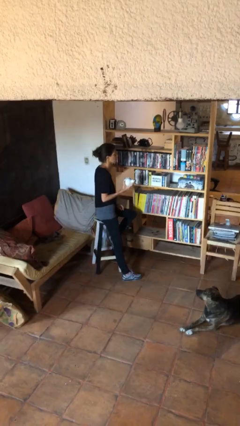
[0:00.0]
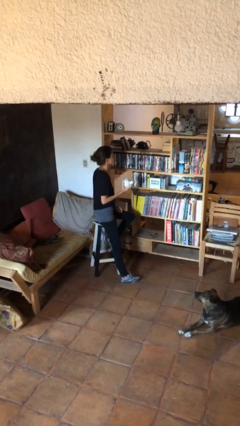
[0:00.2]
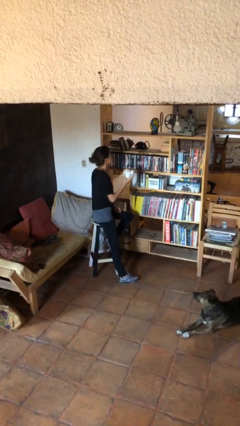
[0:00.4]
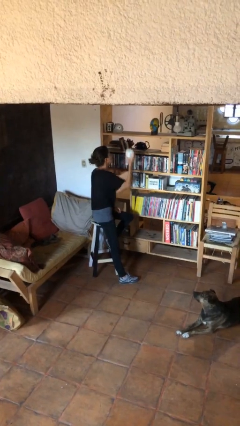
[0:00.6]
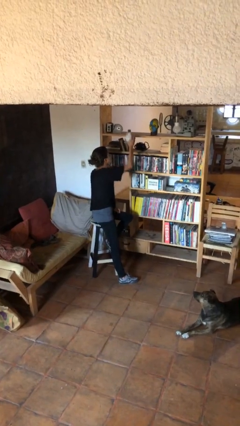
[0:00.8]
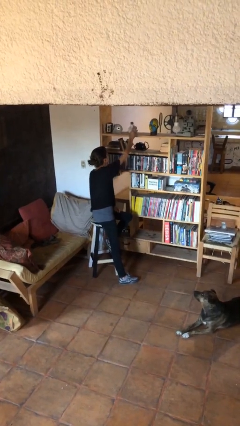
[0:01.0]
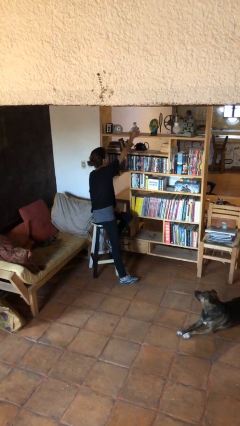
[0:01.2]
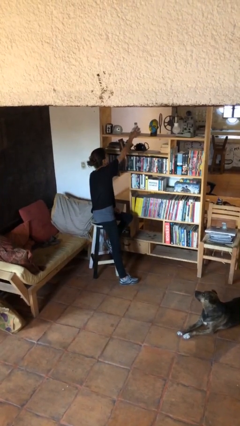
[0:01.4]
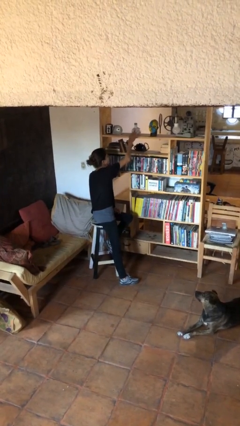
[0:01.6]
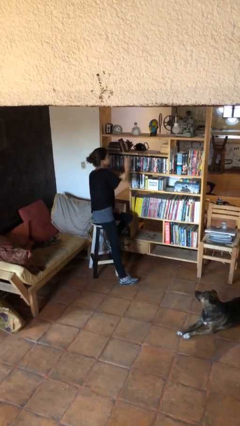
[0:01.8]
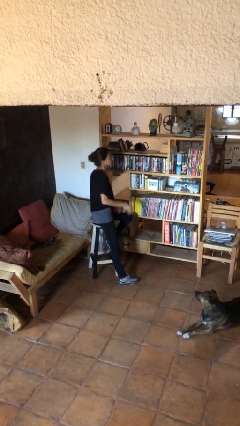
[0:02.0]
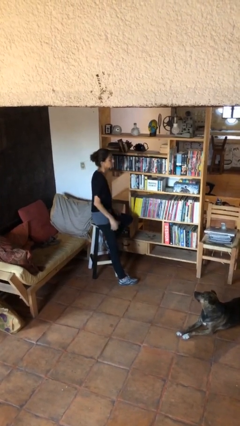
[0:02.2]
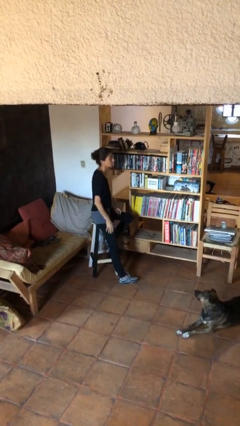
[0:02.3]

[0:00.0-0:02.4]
person puts down object on countertop

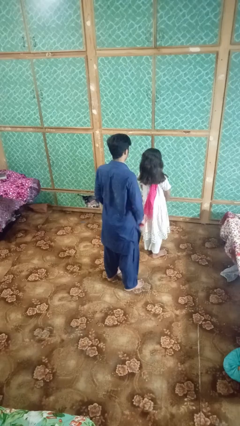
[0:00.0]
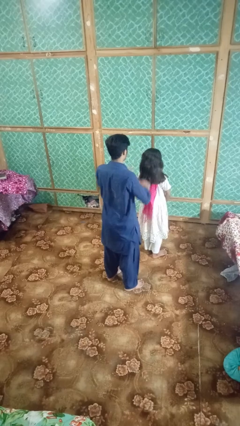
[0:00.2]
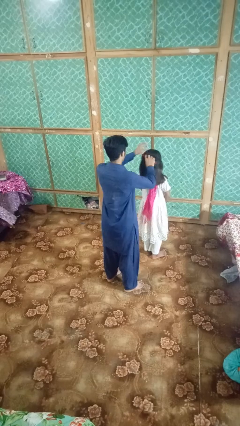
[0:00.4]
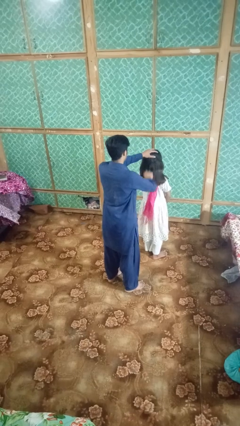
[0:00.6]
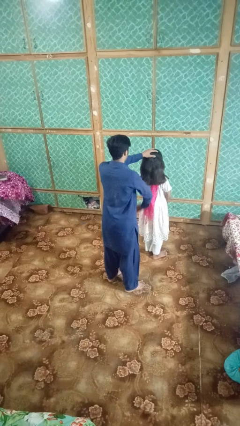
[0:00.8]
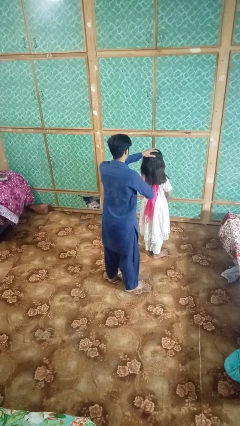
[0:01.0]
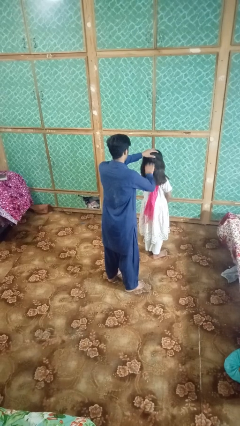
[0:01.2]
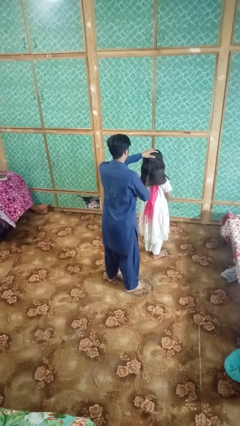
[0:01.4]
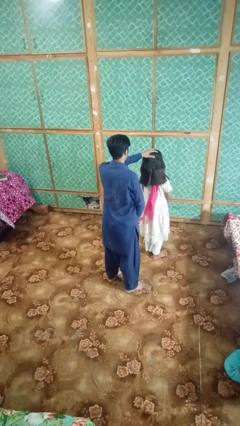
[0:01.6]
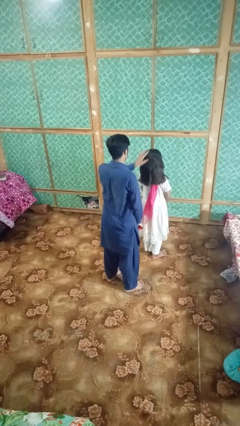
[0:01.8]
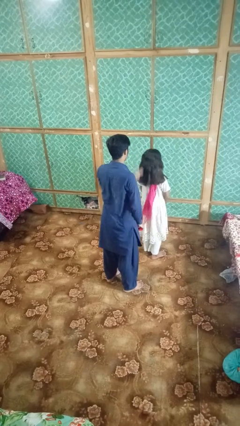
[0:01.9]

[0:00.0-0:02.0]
person brushes hair of person

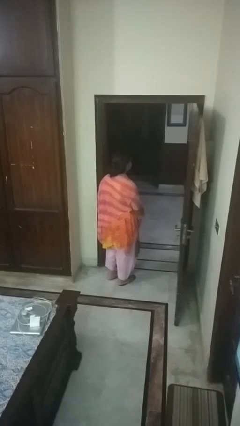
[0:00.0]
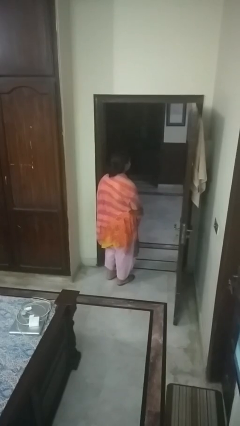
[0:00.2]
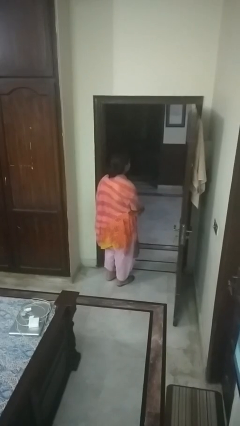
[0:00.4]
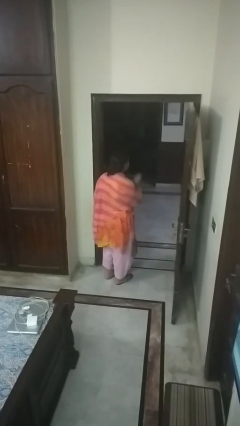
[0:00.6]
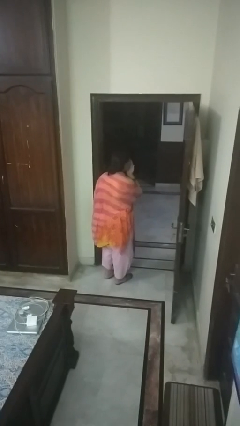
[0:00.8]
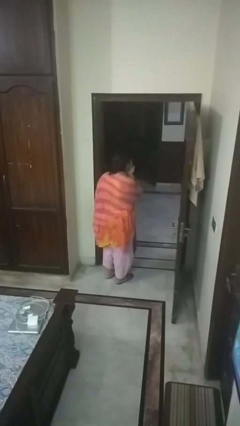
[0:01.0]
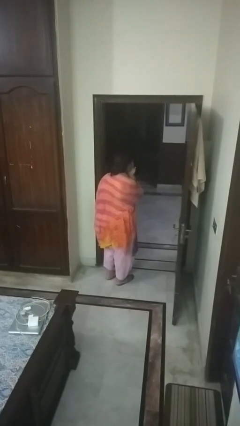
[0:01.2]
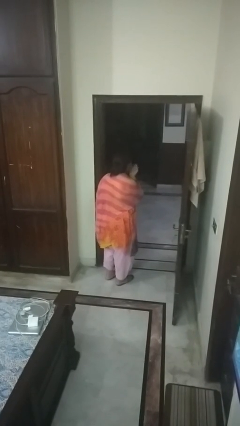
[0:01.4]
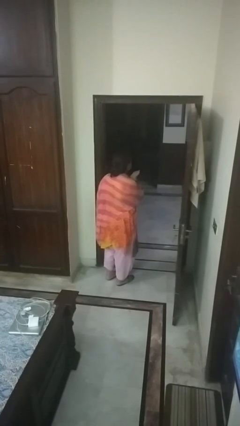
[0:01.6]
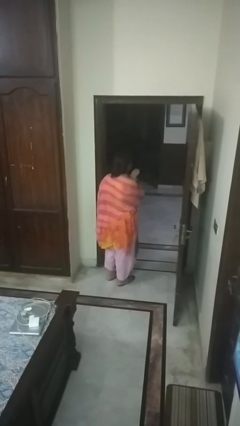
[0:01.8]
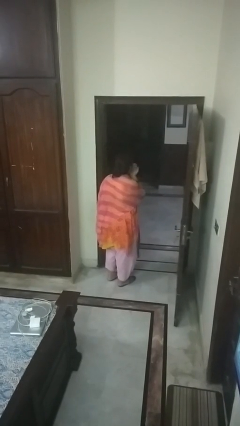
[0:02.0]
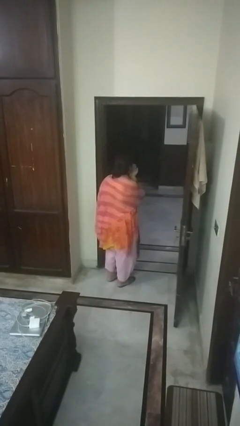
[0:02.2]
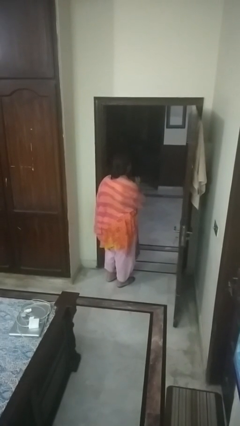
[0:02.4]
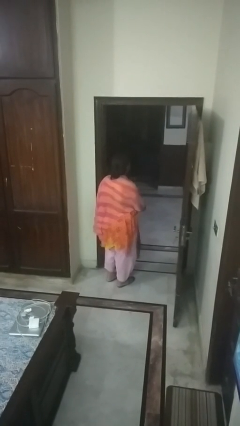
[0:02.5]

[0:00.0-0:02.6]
person gestures blow kiss

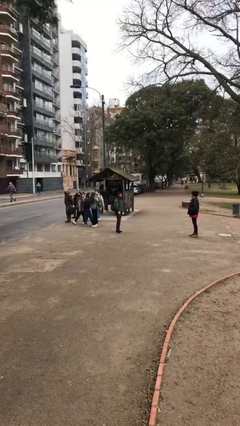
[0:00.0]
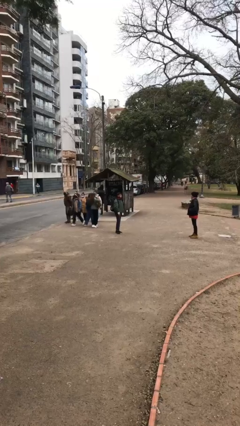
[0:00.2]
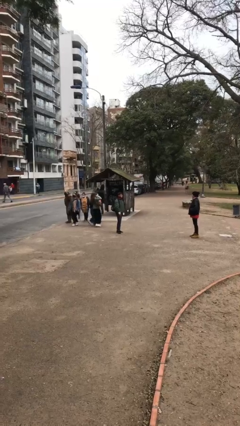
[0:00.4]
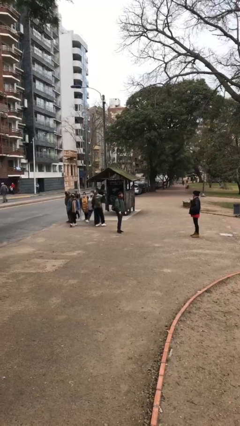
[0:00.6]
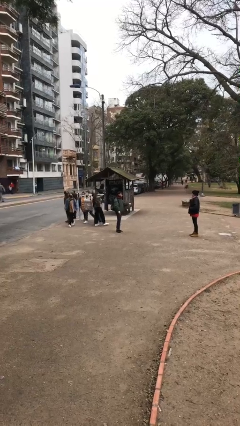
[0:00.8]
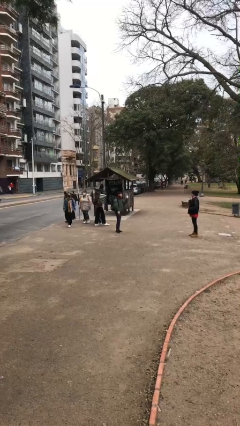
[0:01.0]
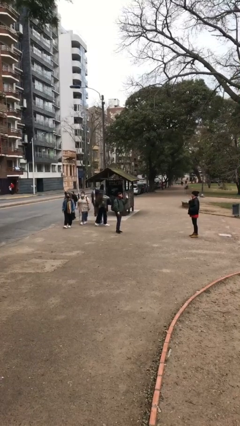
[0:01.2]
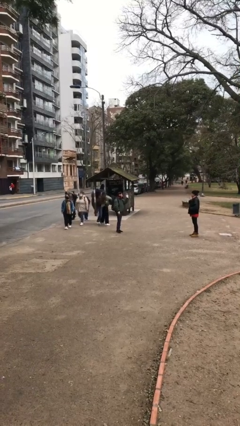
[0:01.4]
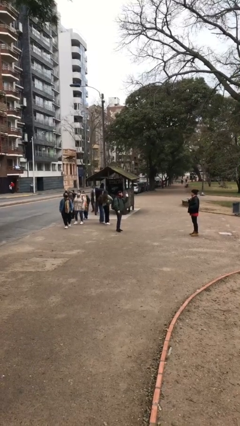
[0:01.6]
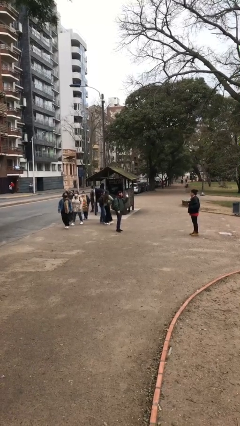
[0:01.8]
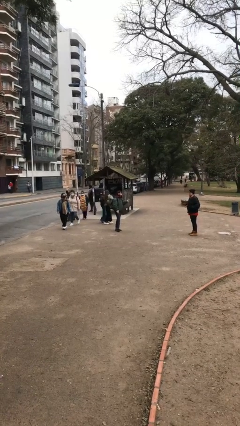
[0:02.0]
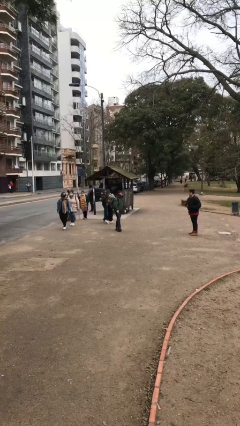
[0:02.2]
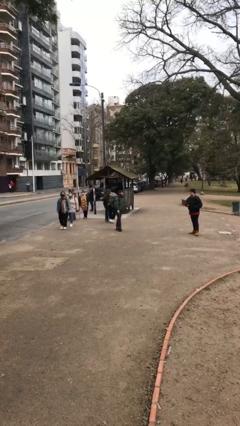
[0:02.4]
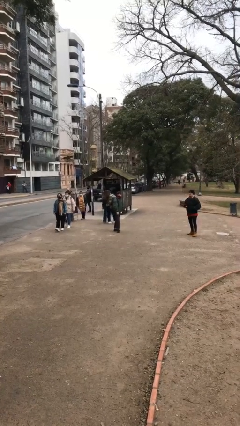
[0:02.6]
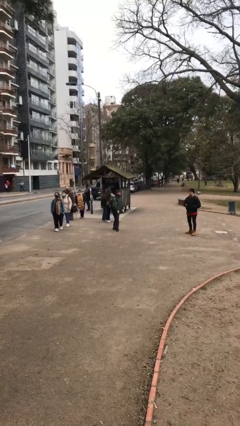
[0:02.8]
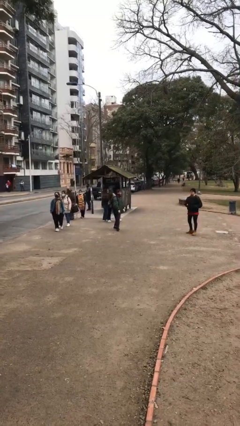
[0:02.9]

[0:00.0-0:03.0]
person waves at person

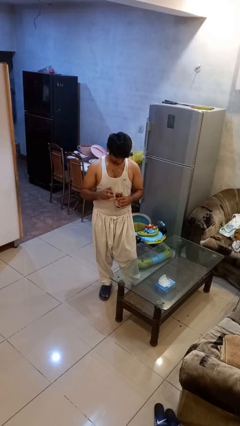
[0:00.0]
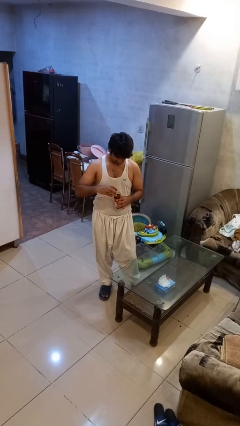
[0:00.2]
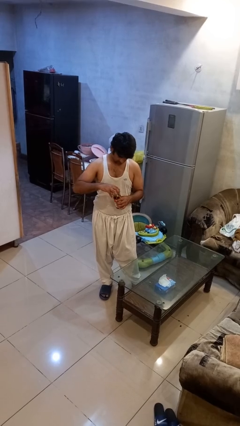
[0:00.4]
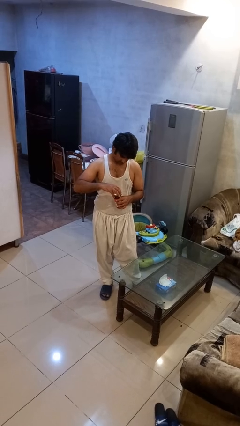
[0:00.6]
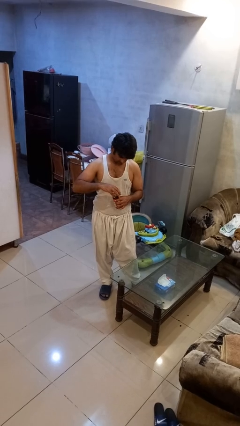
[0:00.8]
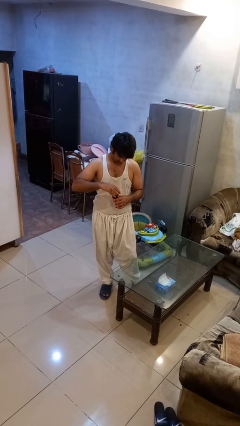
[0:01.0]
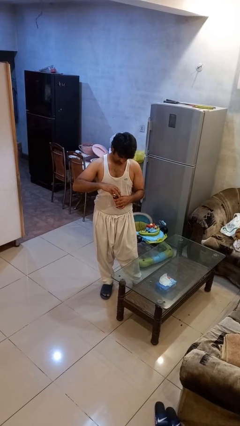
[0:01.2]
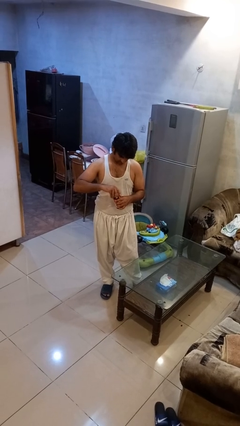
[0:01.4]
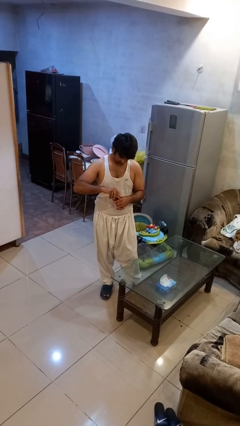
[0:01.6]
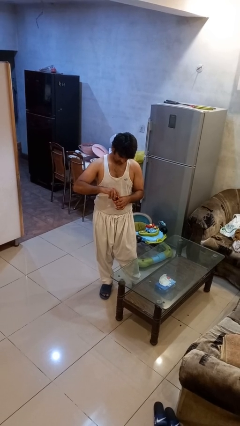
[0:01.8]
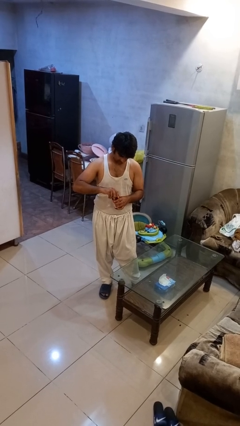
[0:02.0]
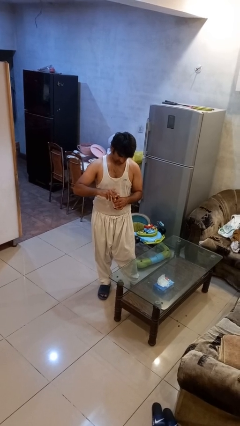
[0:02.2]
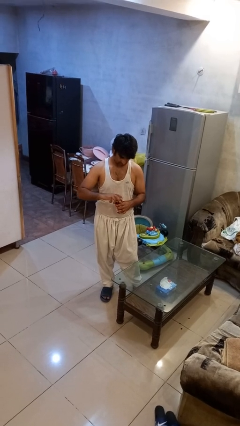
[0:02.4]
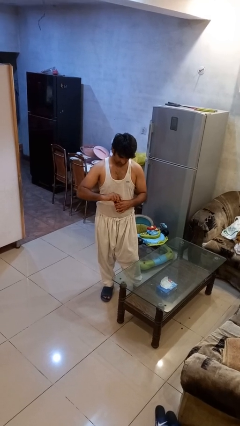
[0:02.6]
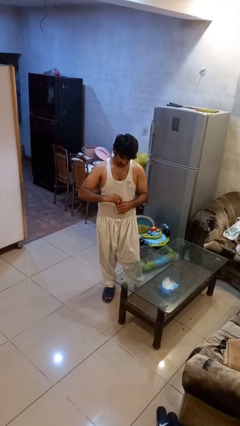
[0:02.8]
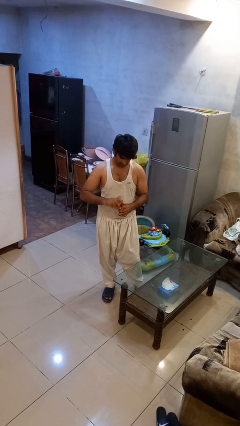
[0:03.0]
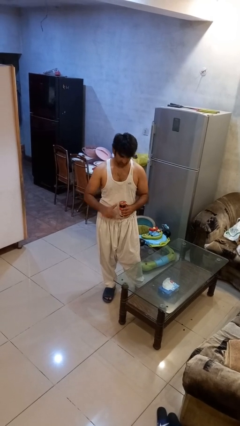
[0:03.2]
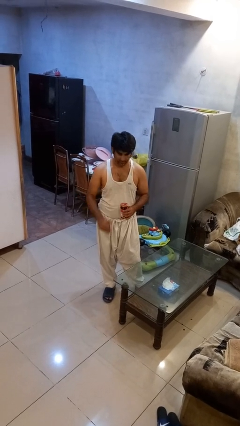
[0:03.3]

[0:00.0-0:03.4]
person closes jar

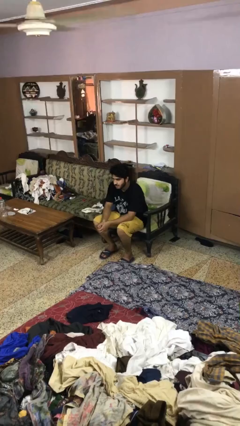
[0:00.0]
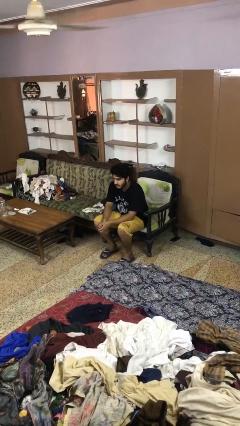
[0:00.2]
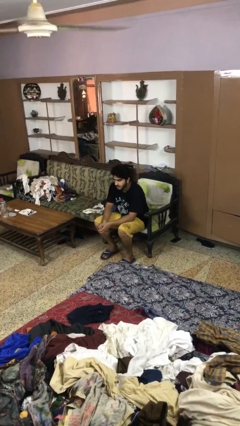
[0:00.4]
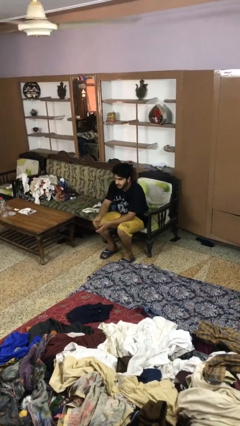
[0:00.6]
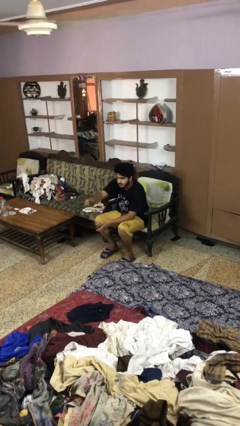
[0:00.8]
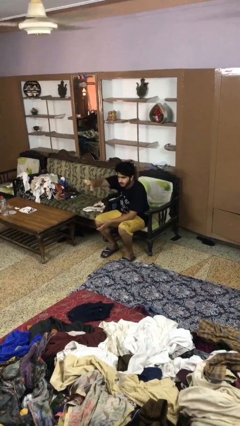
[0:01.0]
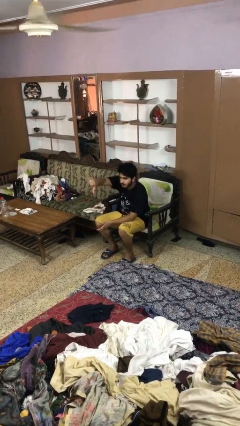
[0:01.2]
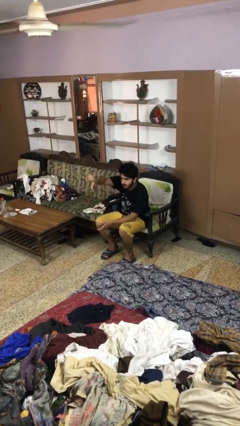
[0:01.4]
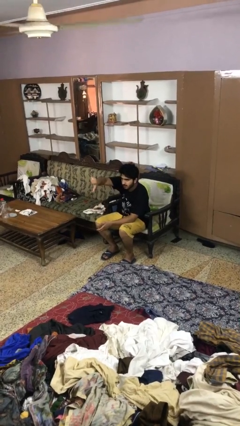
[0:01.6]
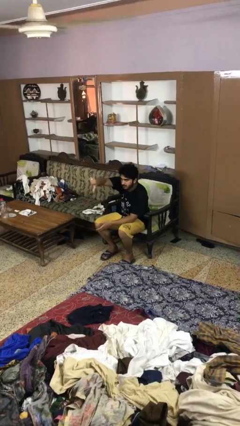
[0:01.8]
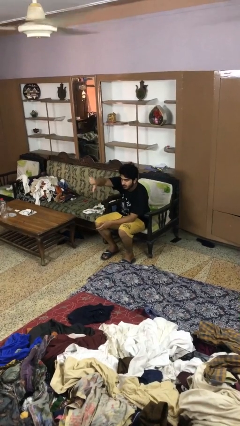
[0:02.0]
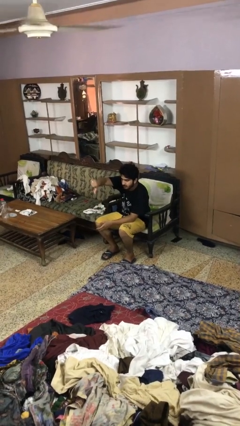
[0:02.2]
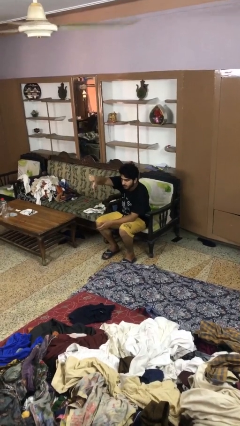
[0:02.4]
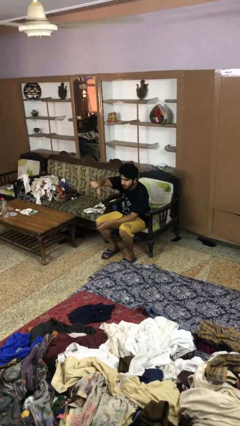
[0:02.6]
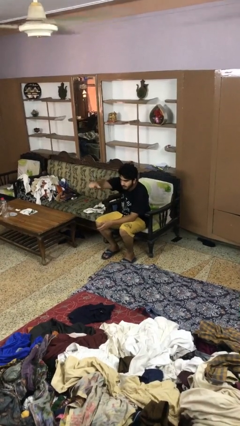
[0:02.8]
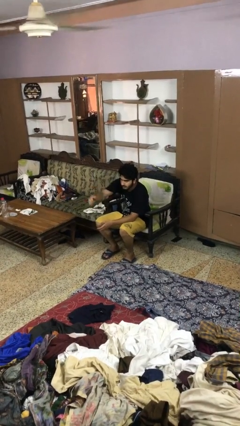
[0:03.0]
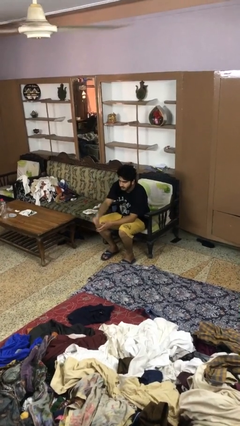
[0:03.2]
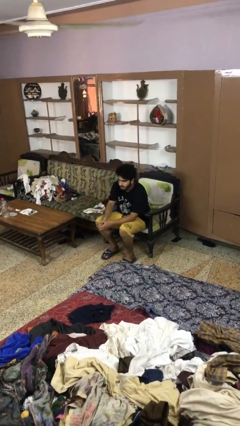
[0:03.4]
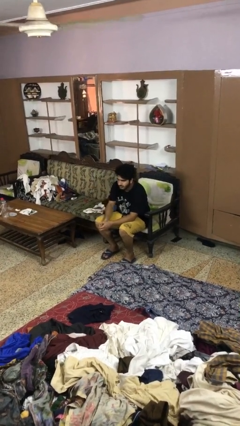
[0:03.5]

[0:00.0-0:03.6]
person gestures thumbs down

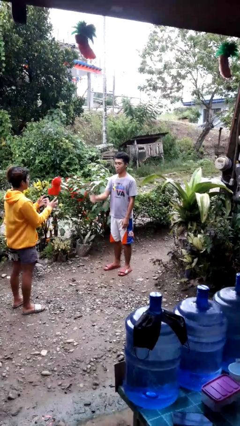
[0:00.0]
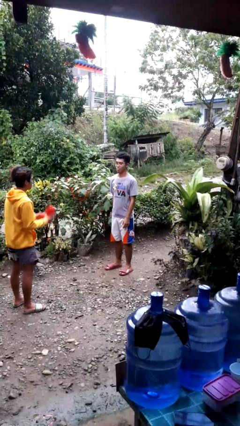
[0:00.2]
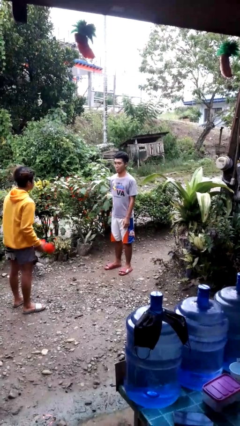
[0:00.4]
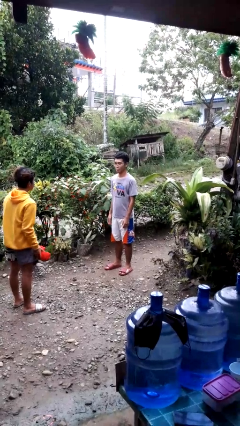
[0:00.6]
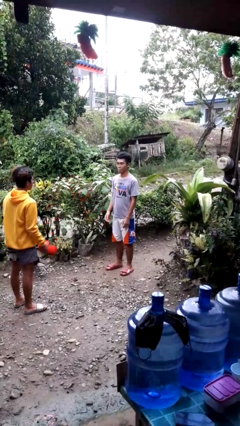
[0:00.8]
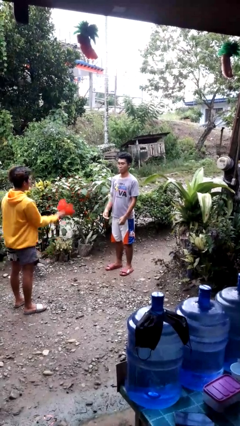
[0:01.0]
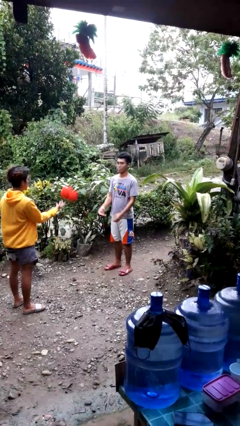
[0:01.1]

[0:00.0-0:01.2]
person throws object to person
